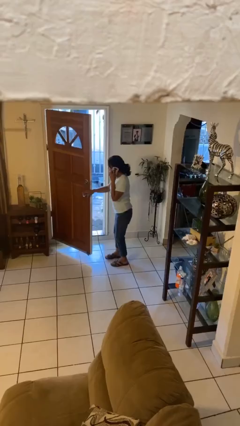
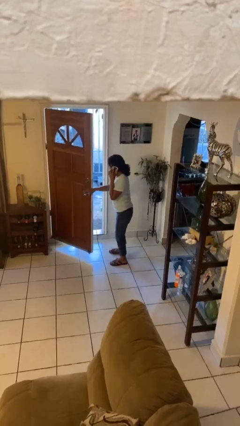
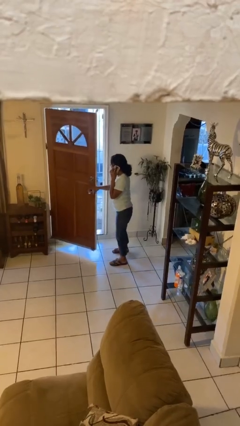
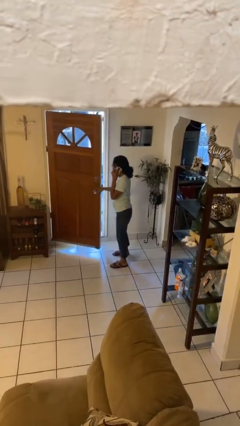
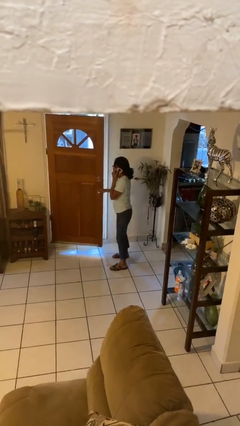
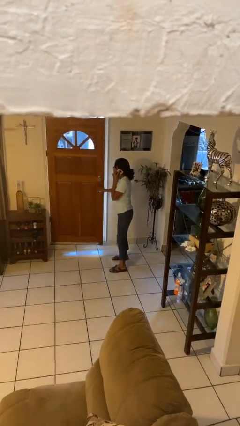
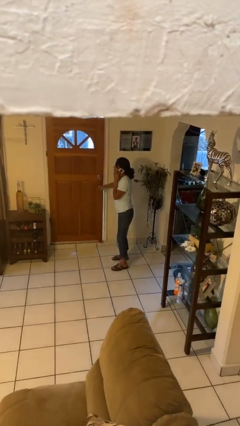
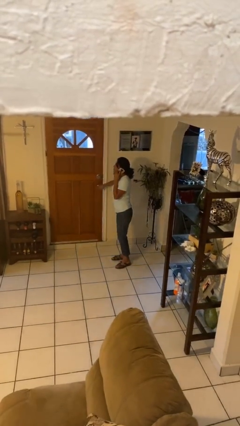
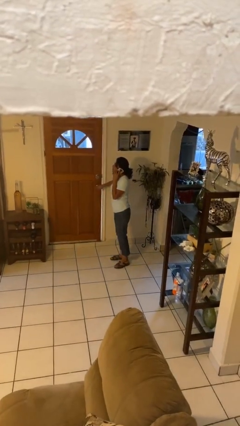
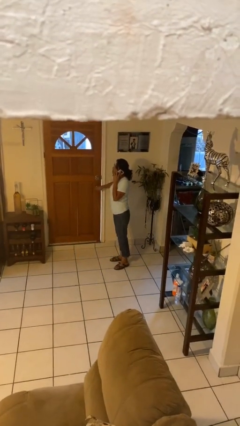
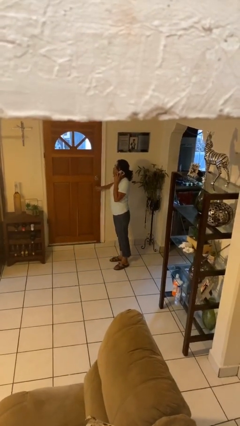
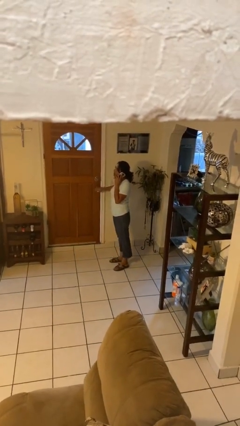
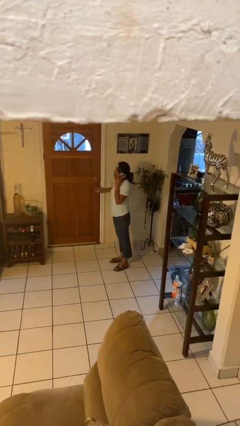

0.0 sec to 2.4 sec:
person closes facility door

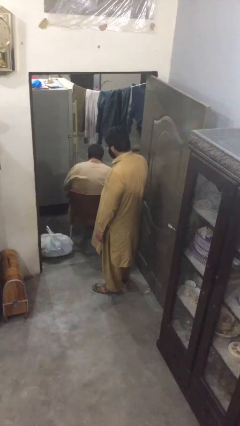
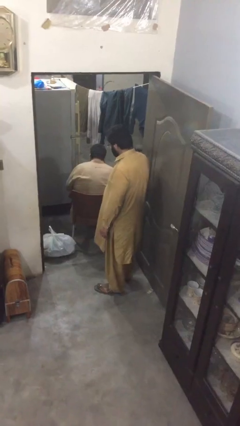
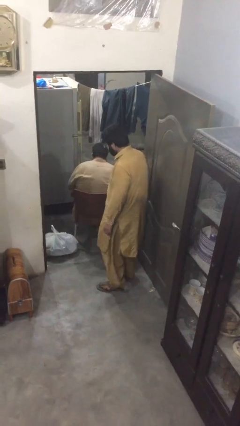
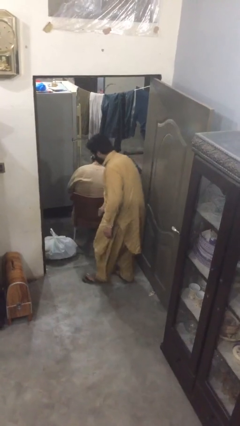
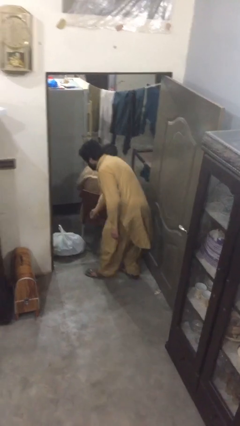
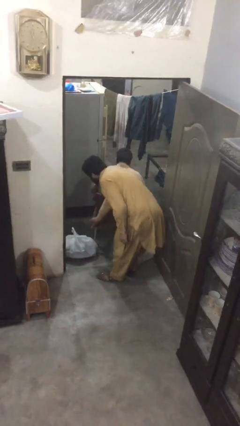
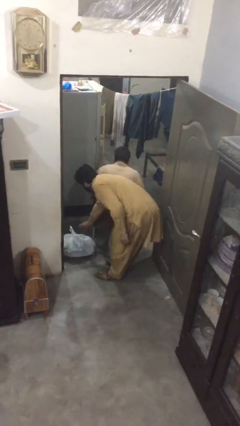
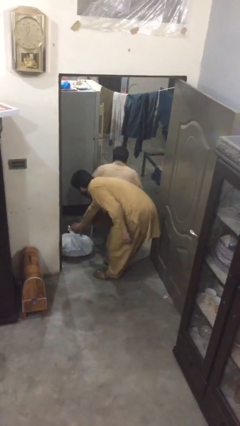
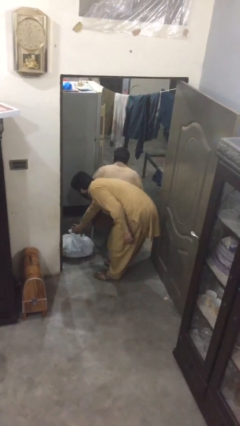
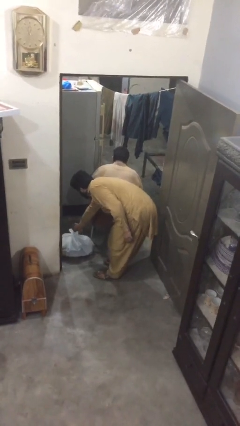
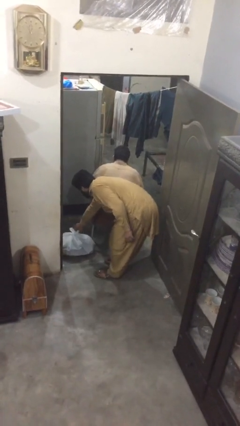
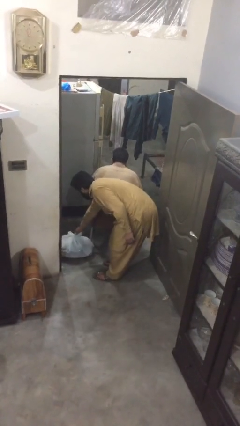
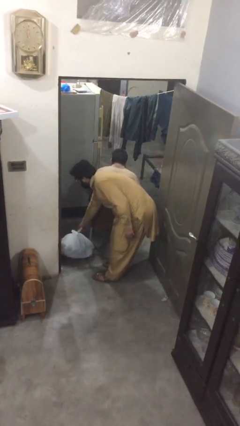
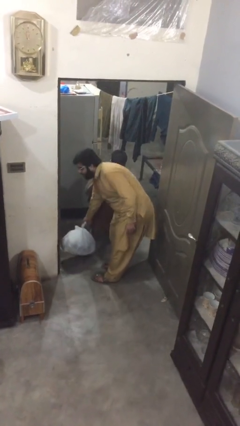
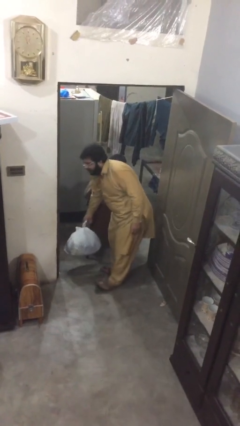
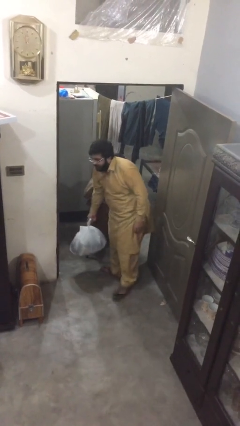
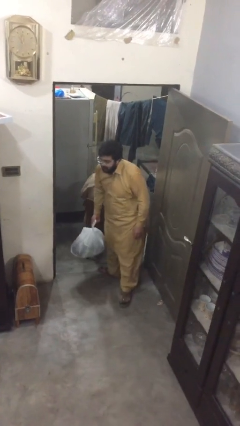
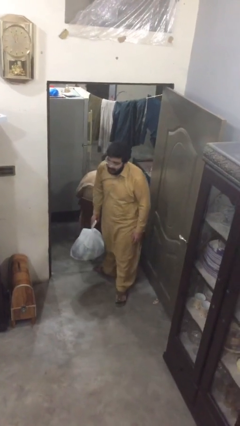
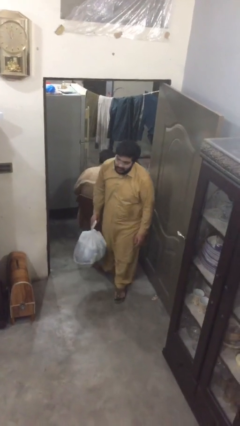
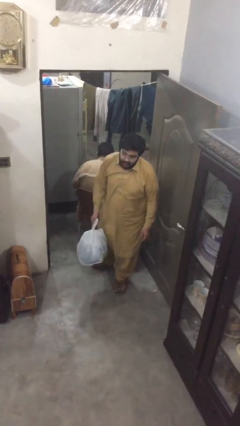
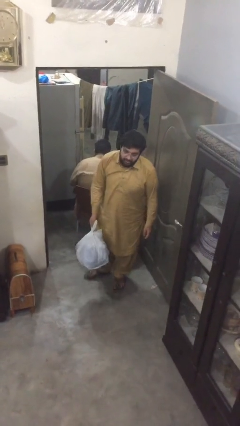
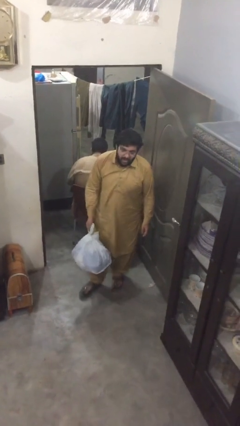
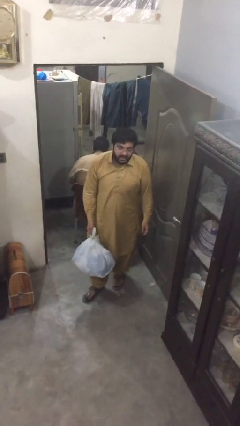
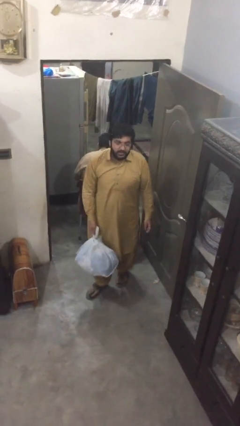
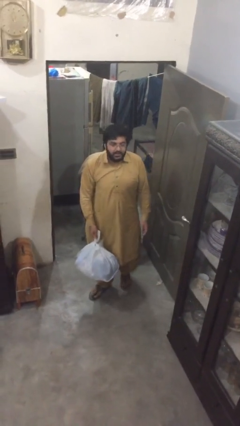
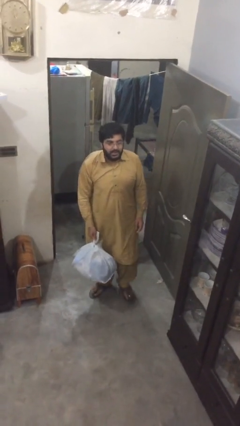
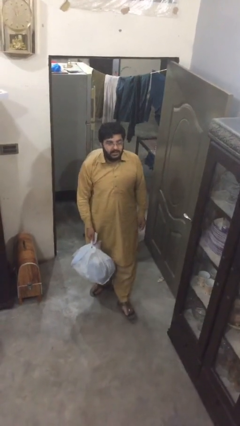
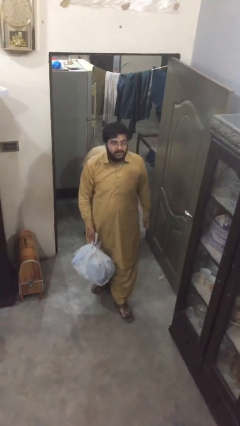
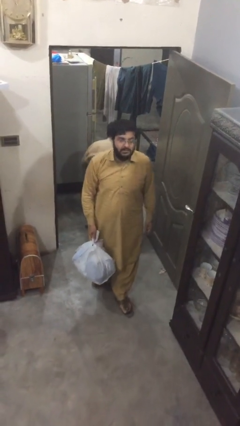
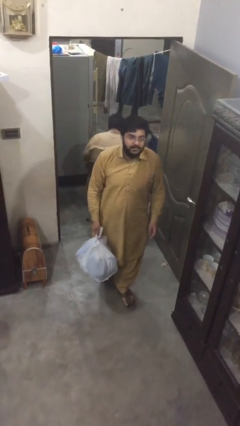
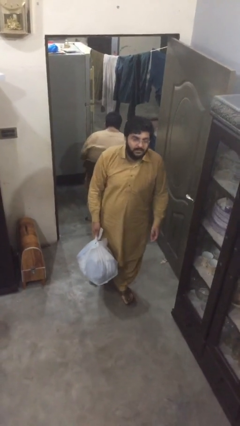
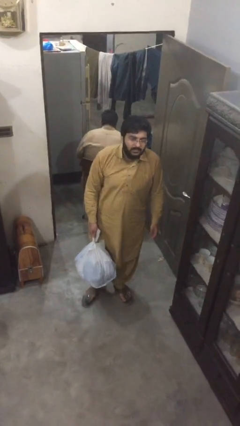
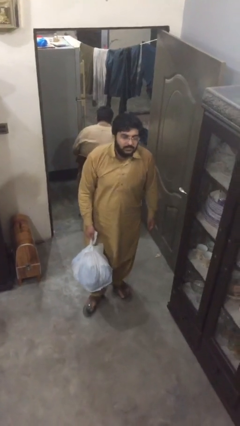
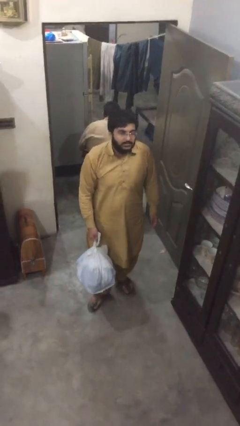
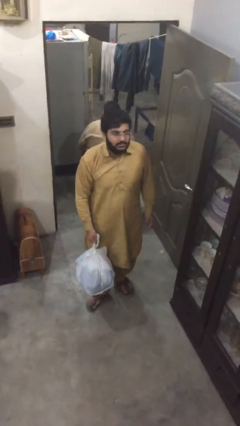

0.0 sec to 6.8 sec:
person steals object from person

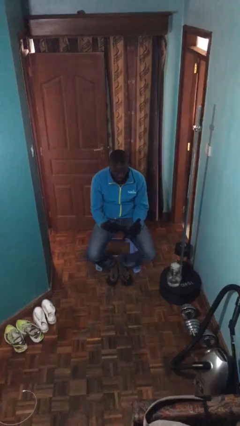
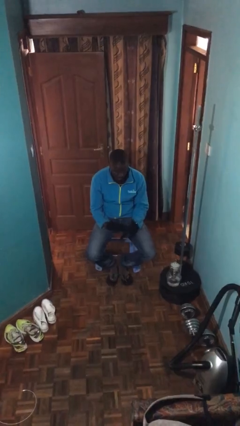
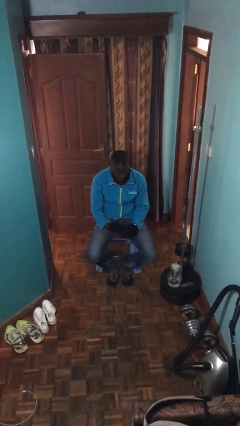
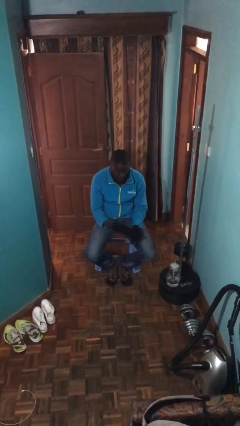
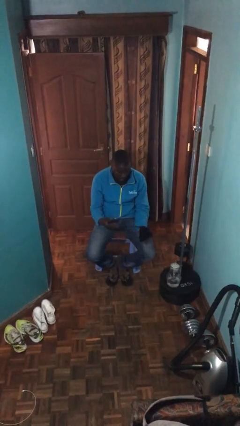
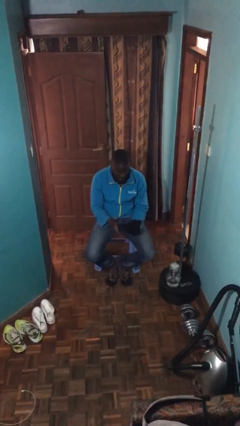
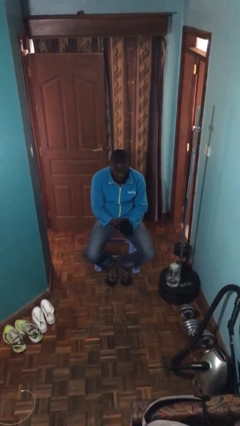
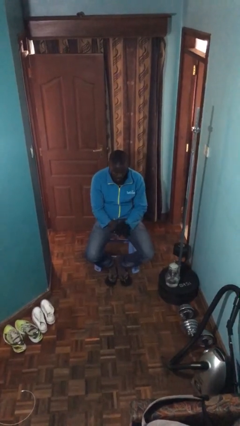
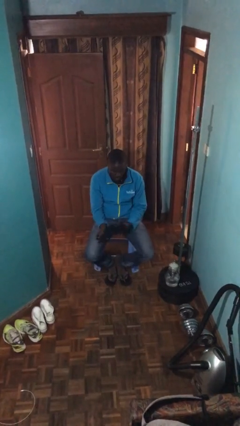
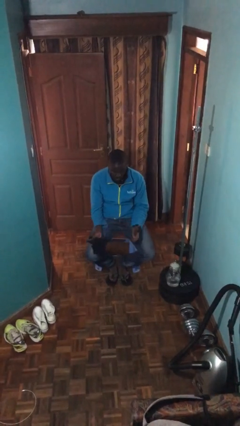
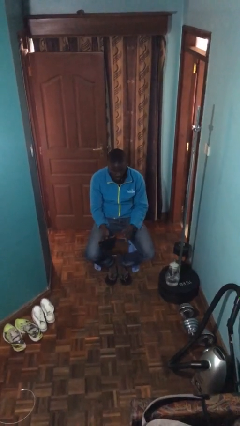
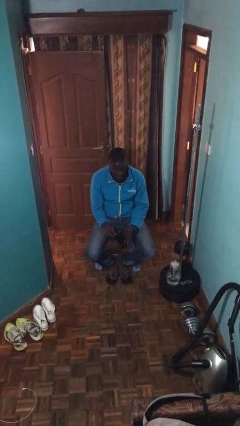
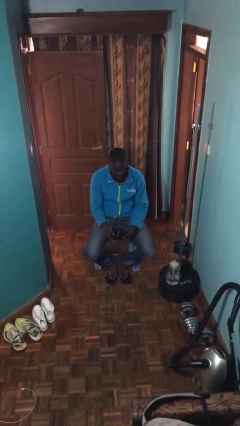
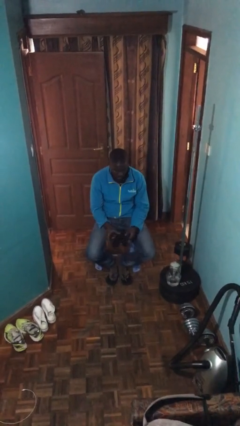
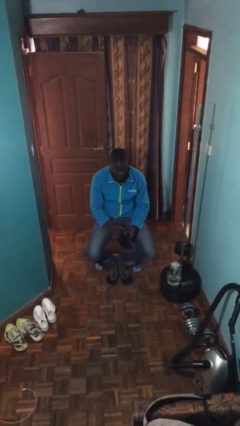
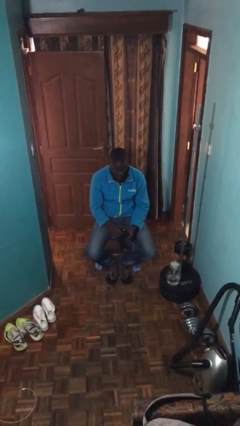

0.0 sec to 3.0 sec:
person takes off gloves

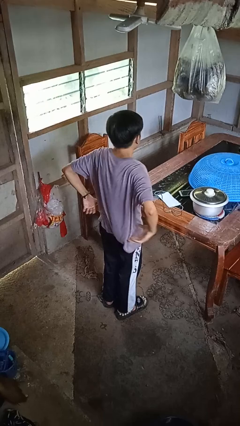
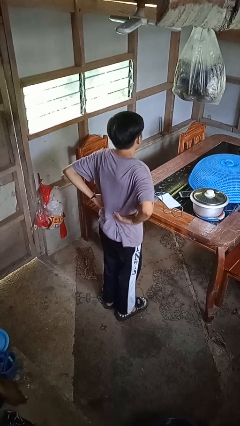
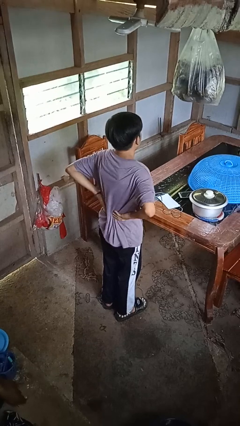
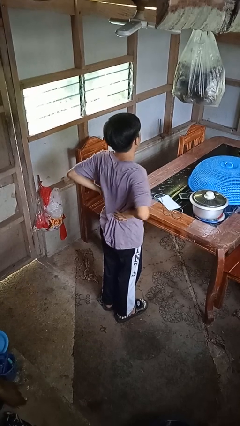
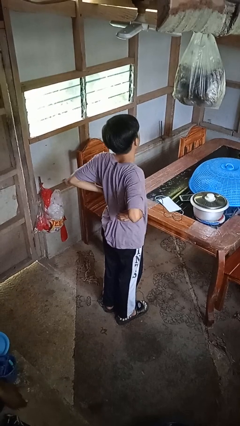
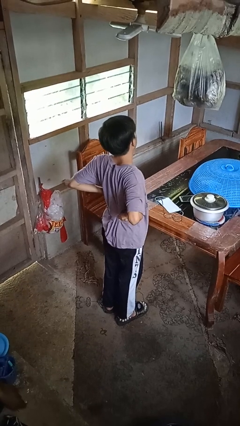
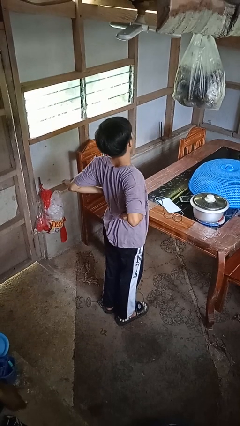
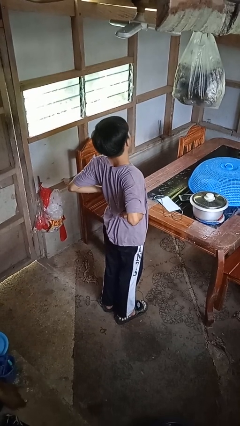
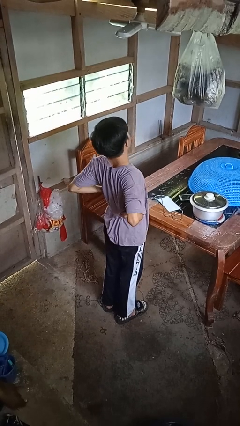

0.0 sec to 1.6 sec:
person stretches back

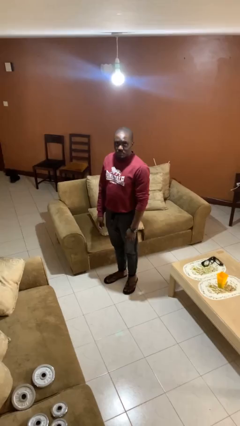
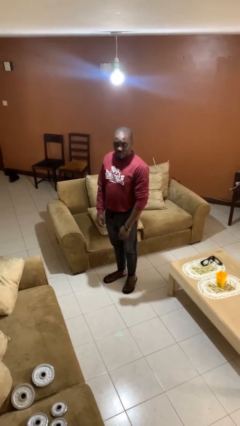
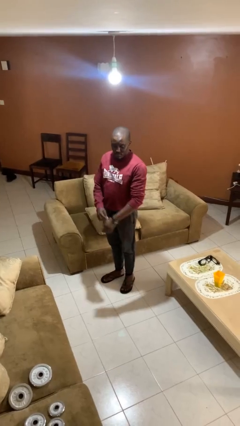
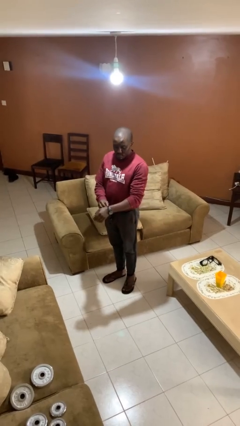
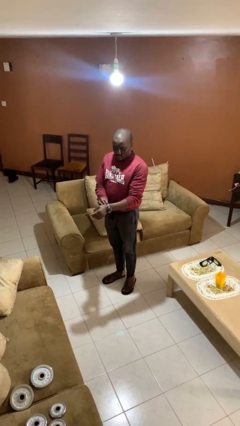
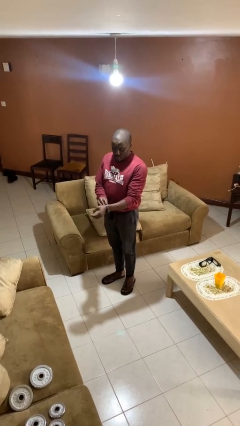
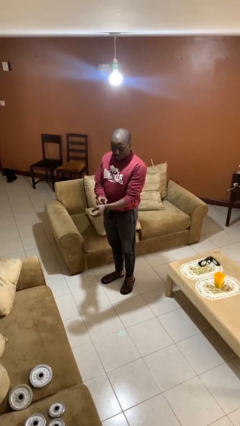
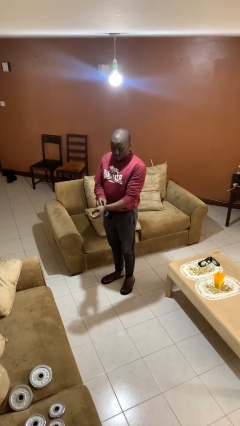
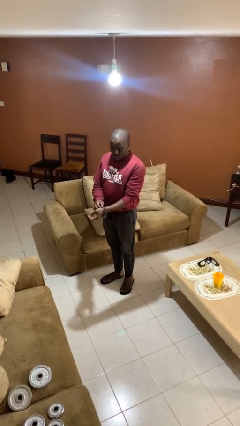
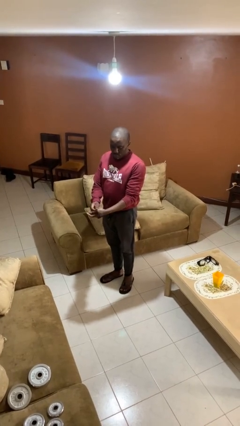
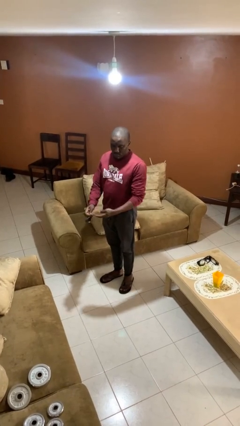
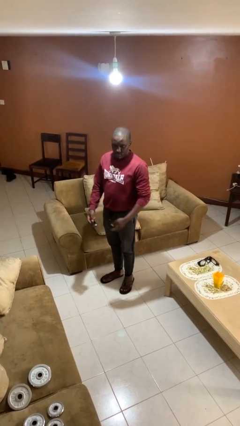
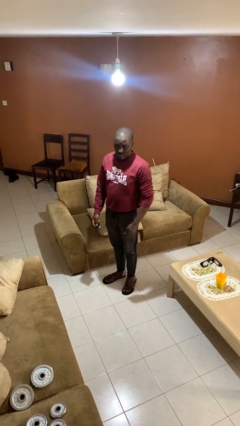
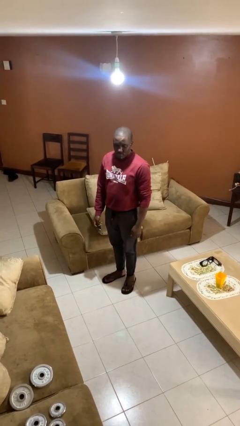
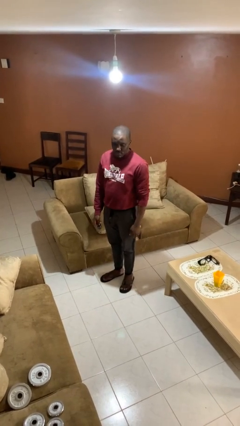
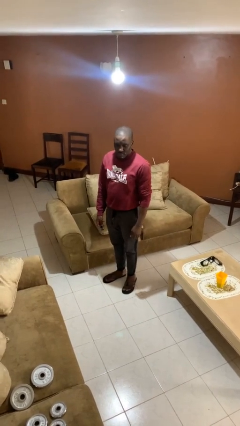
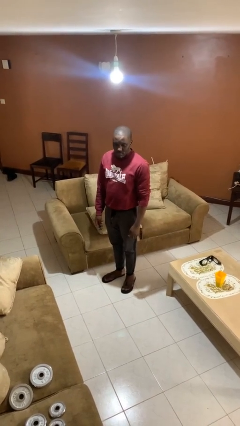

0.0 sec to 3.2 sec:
person takes off wristwatch

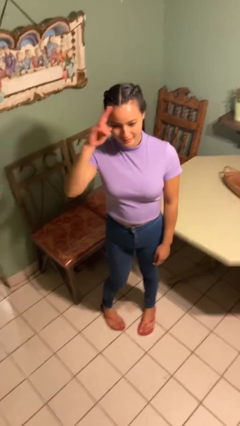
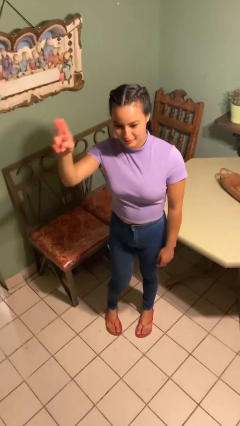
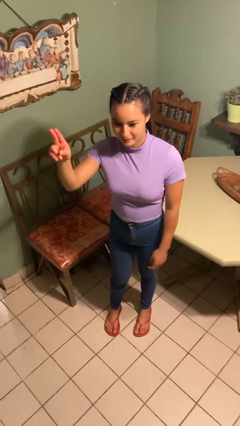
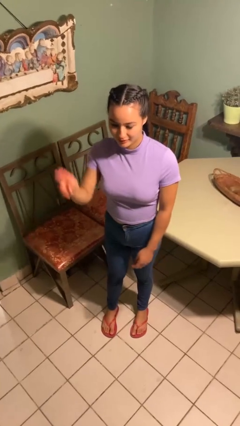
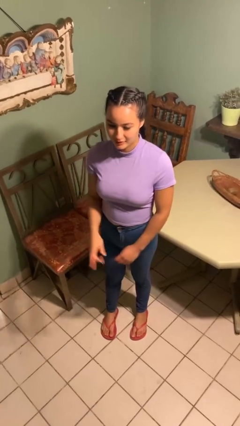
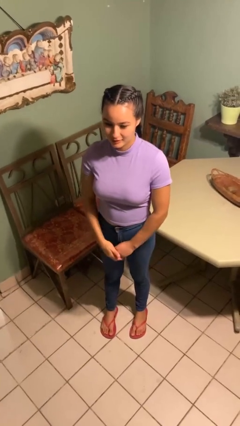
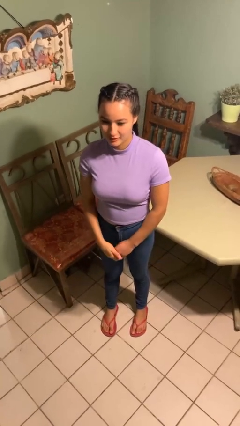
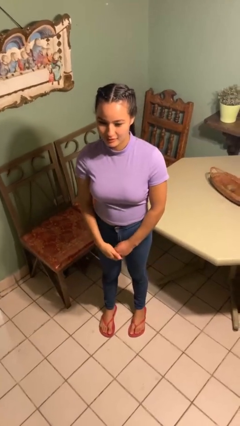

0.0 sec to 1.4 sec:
person salutes
